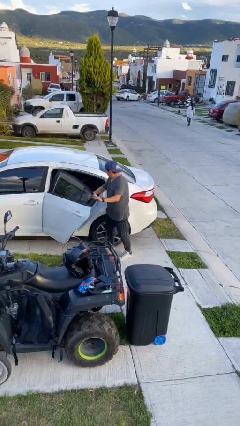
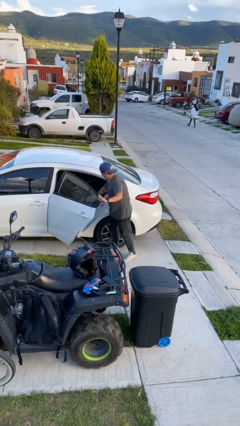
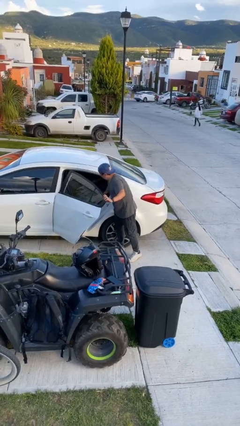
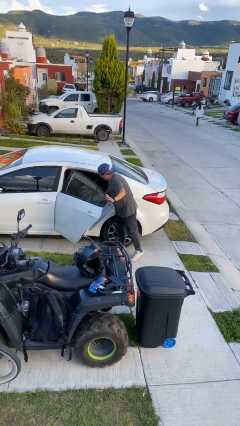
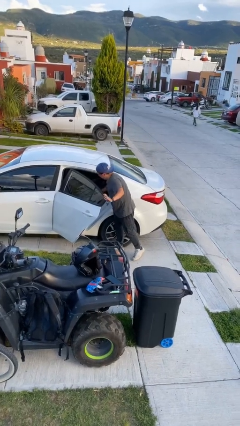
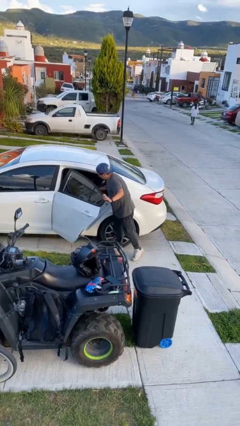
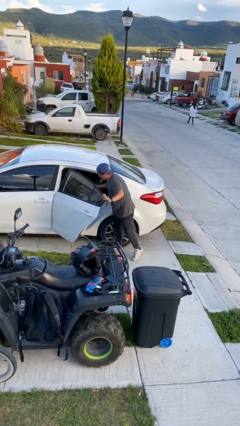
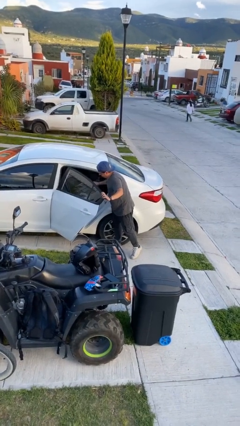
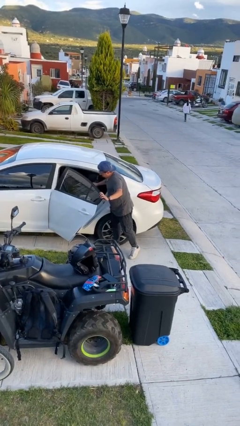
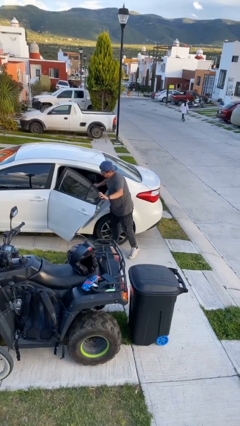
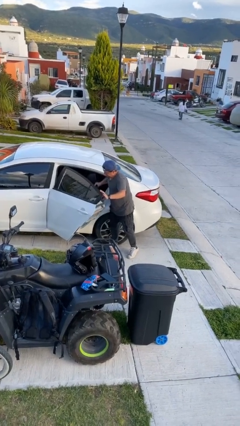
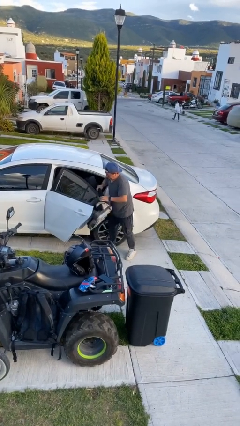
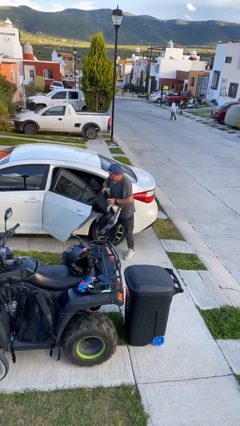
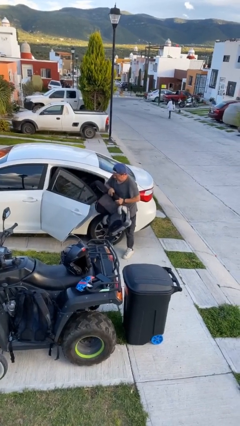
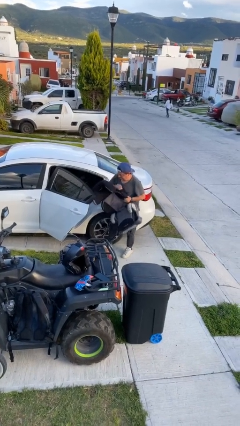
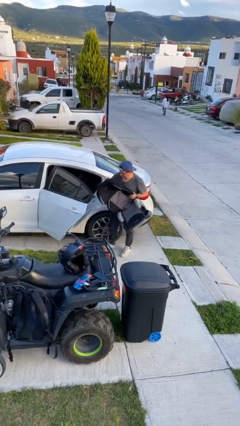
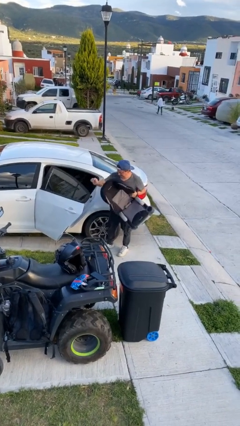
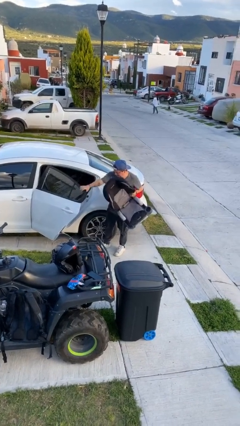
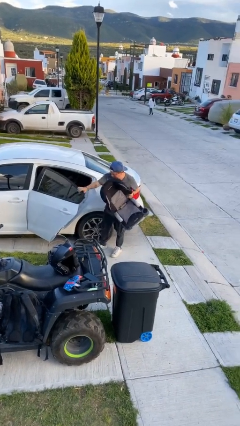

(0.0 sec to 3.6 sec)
person unloads car

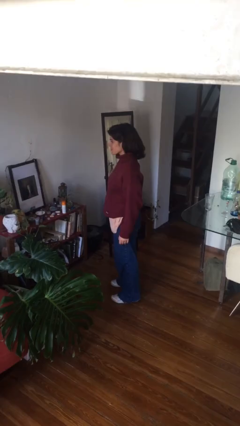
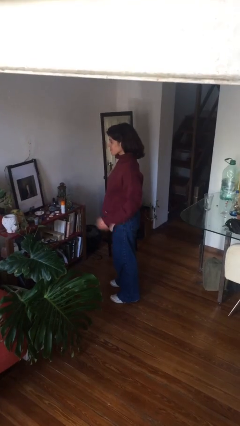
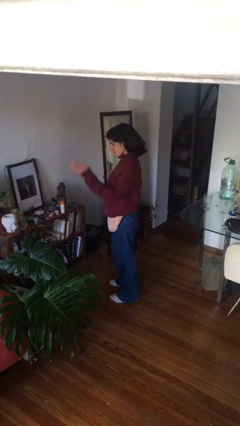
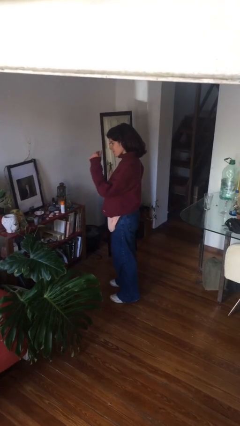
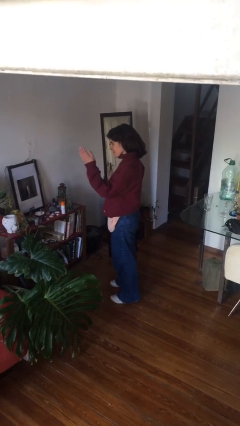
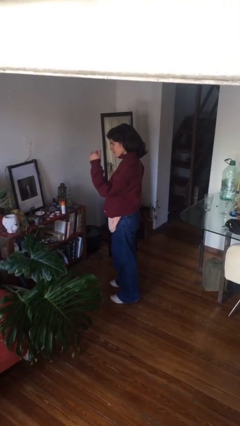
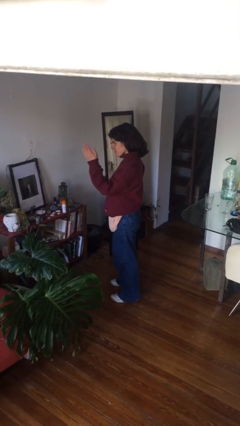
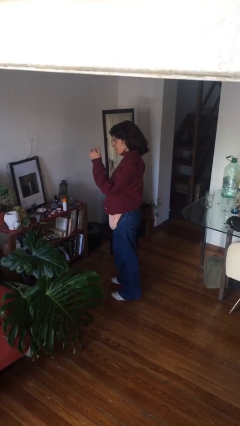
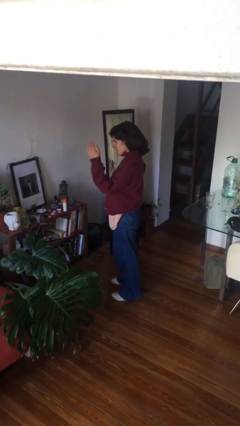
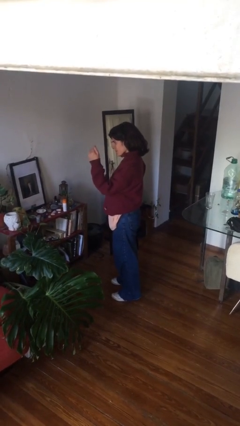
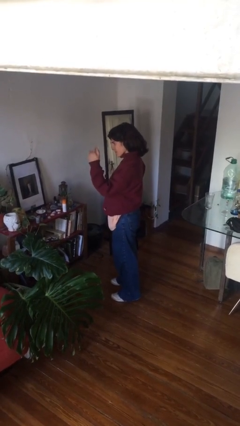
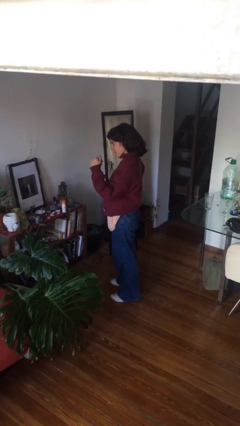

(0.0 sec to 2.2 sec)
person gestures come here

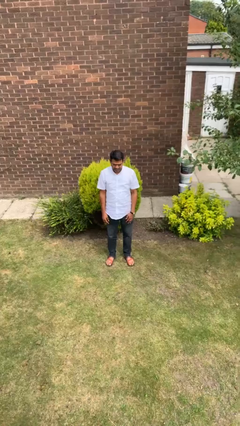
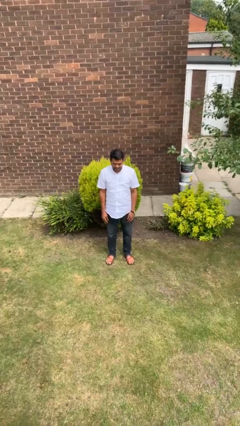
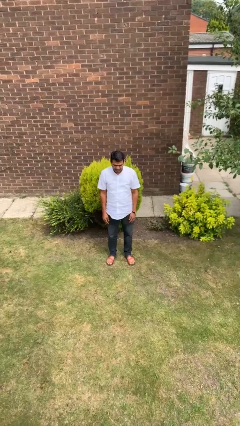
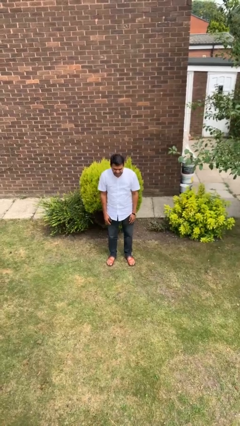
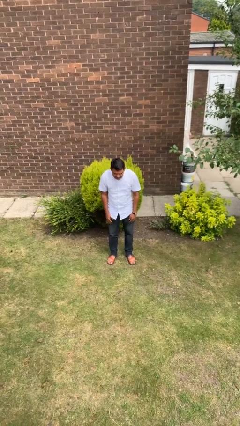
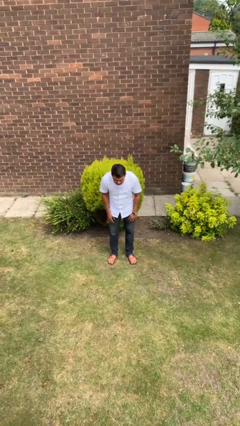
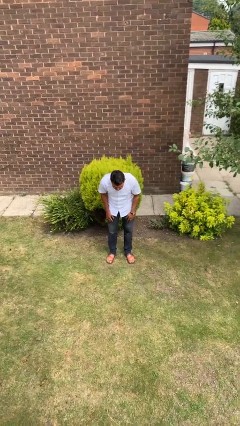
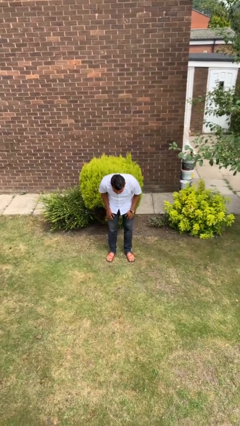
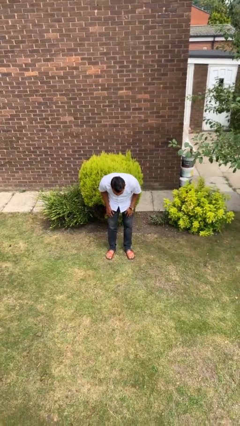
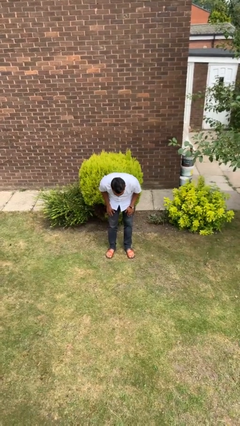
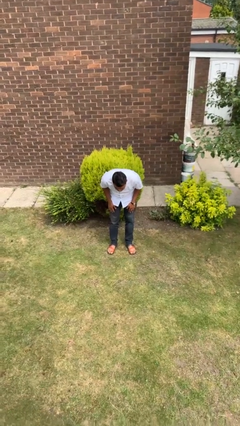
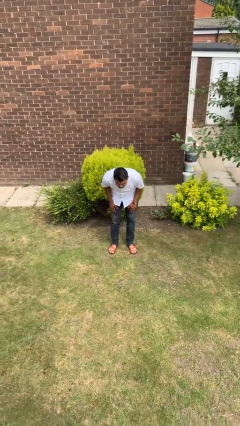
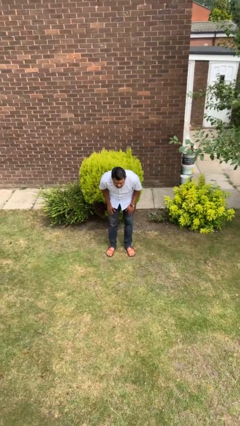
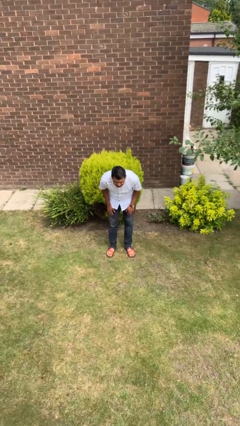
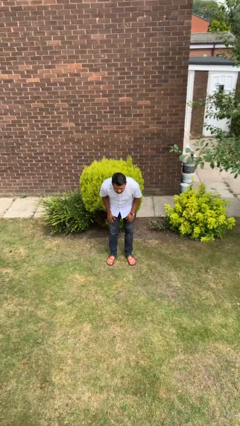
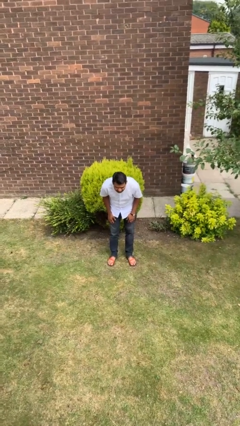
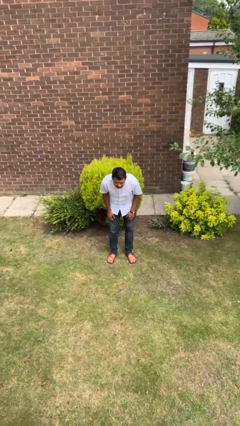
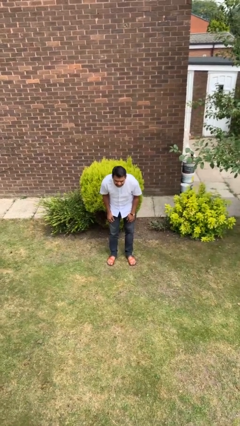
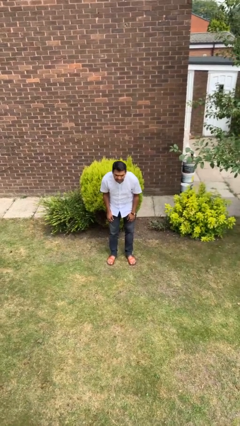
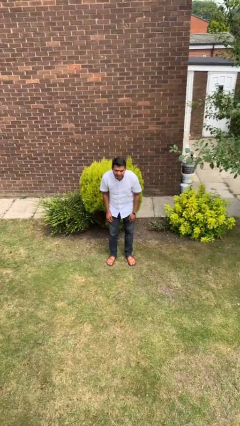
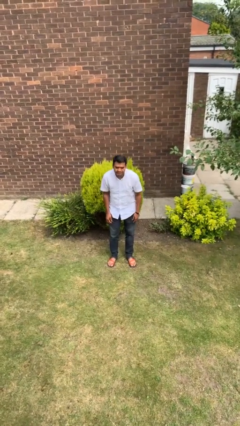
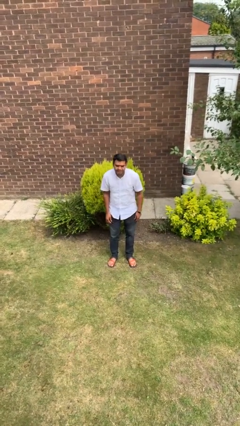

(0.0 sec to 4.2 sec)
person bows

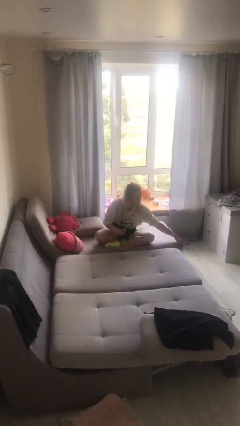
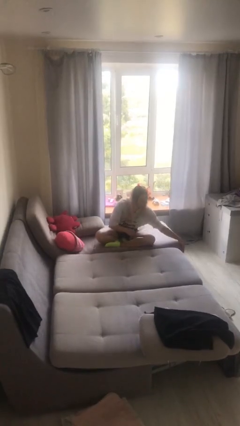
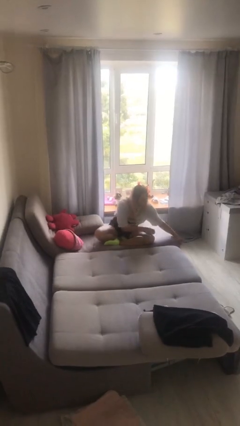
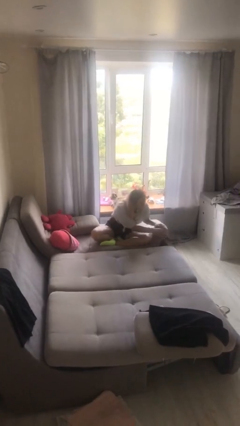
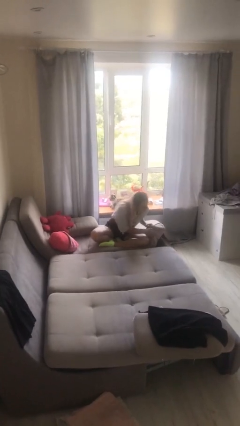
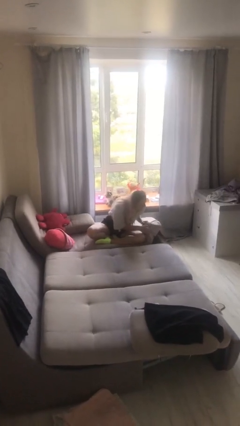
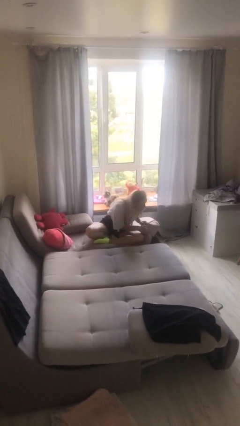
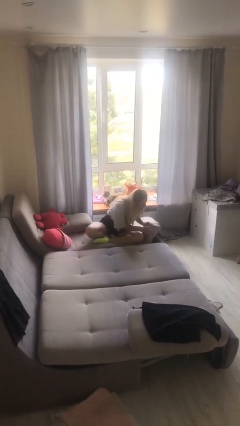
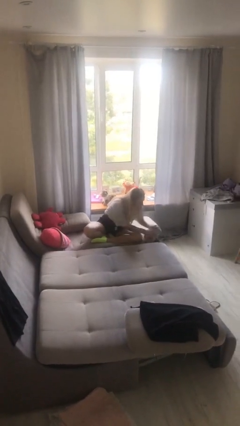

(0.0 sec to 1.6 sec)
person searches under bed

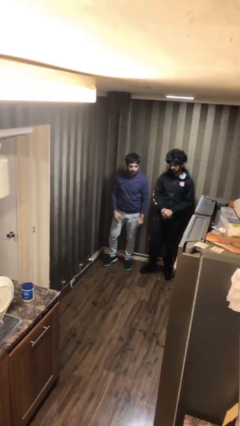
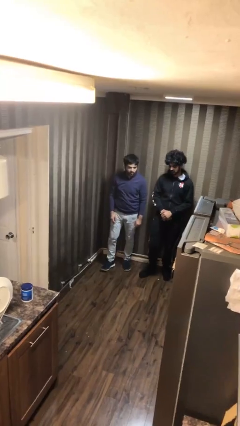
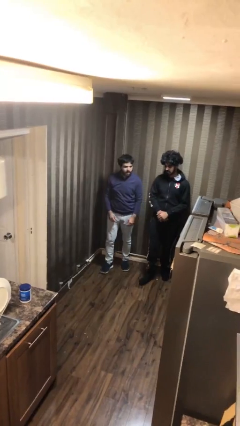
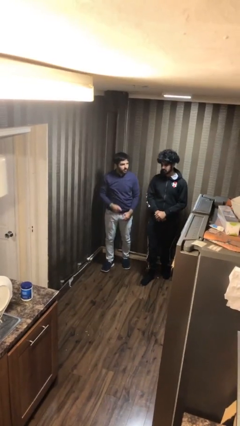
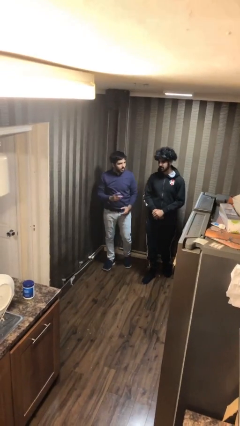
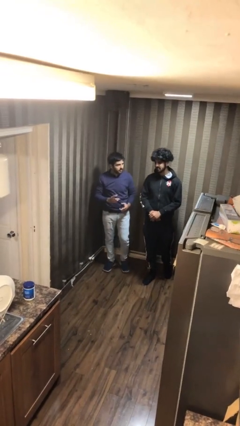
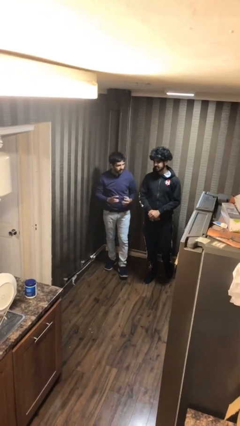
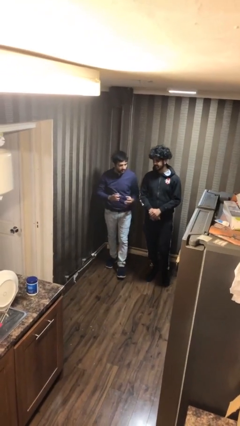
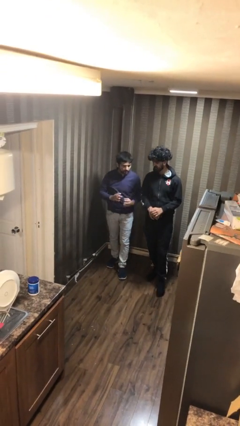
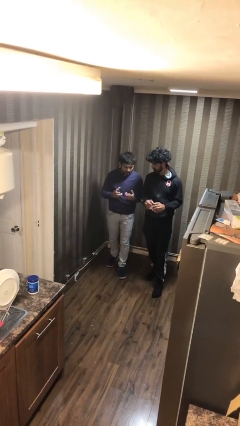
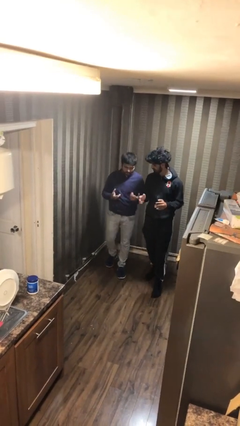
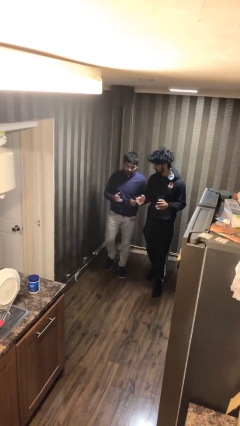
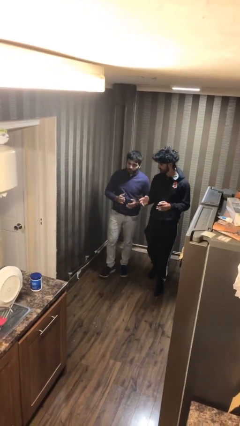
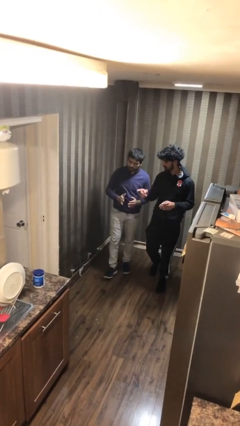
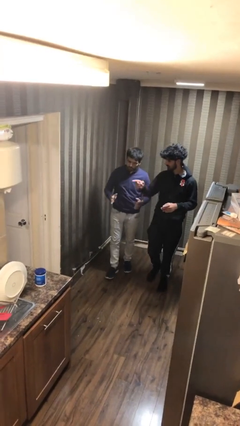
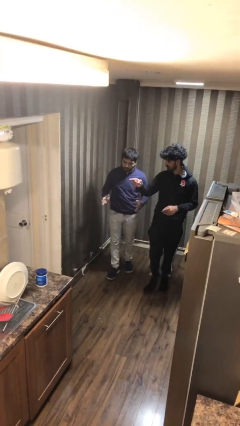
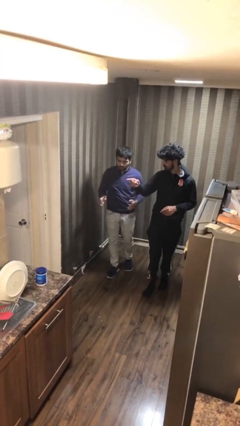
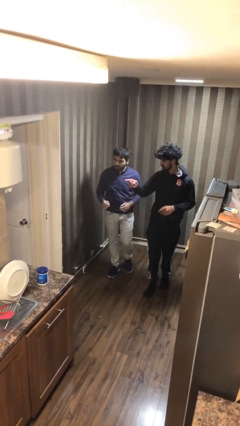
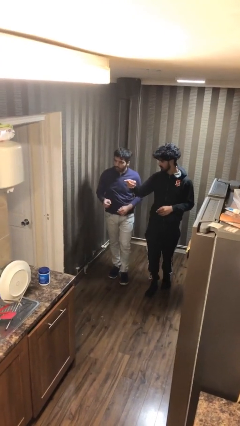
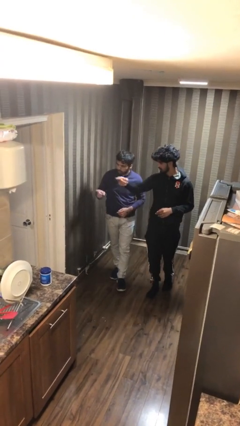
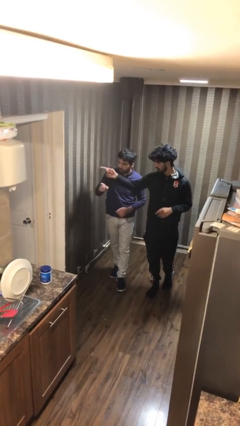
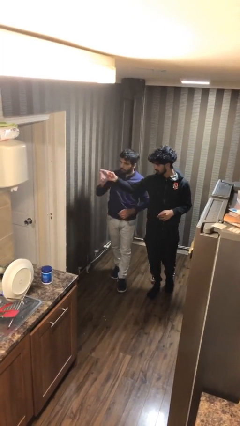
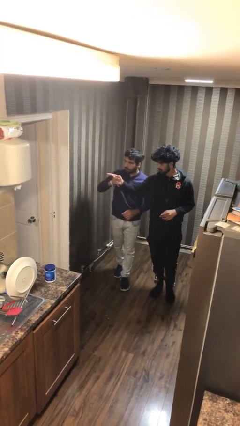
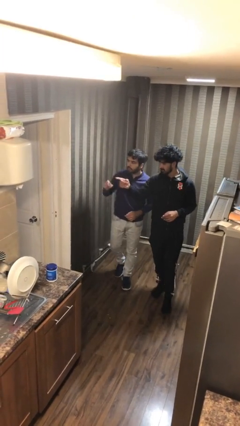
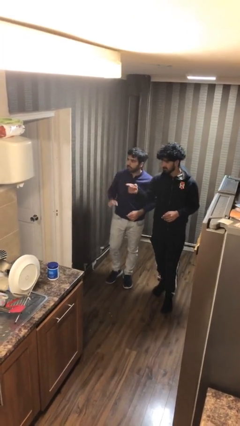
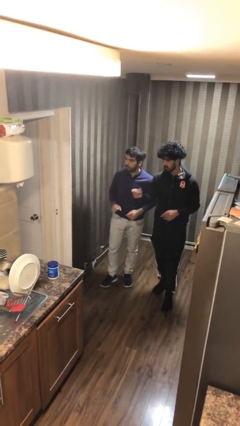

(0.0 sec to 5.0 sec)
person talks to person

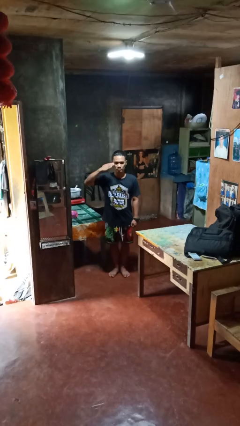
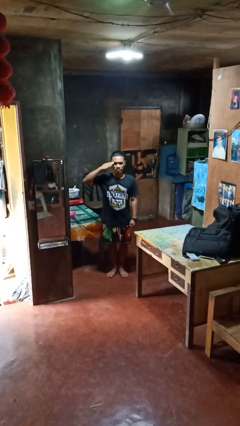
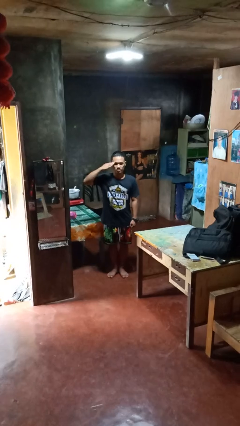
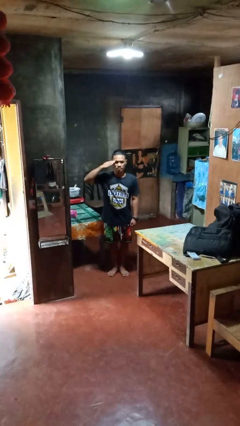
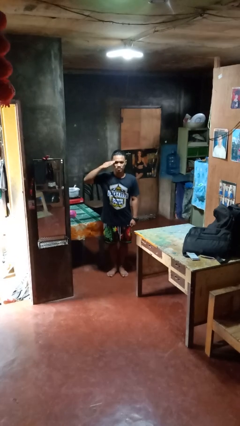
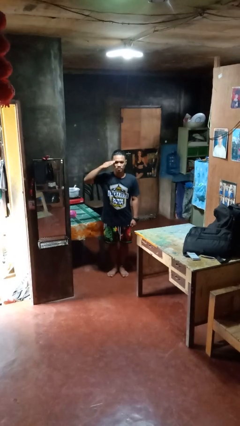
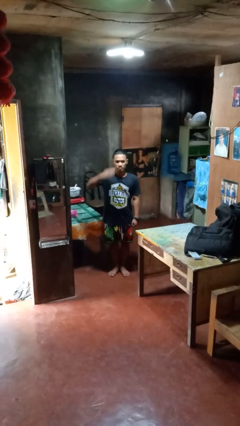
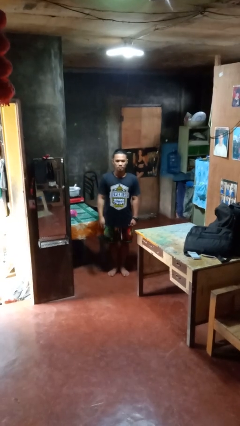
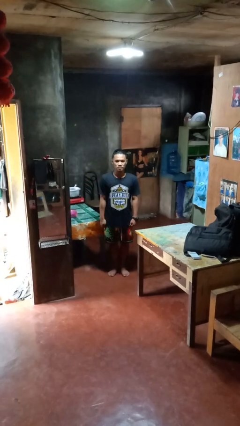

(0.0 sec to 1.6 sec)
person salutes
